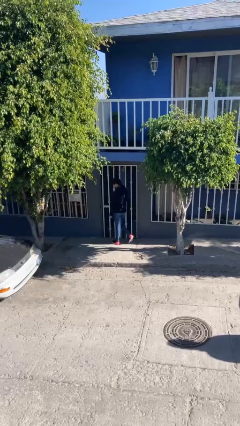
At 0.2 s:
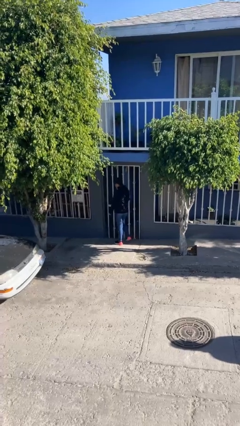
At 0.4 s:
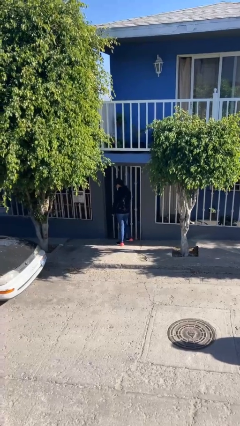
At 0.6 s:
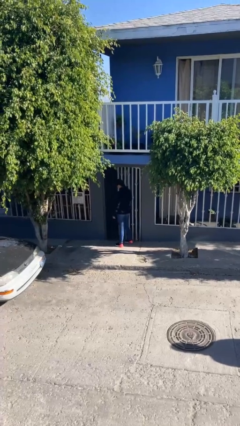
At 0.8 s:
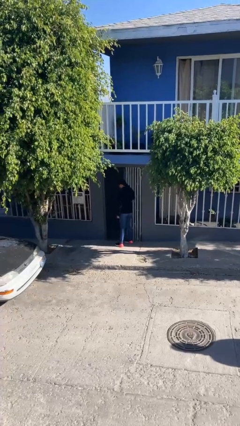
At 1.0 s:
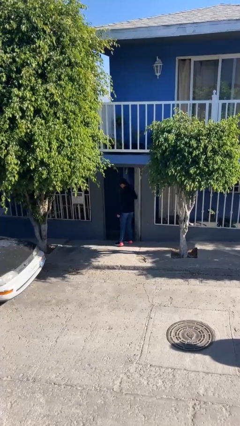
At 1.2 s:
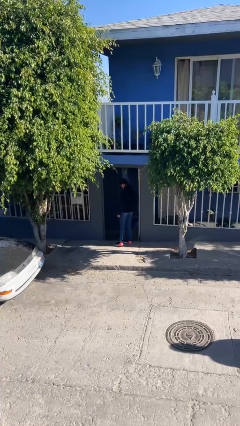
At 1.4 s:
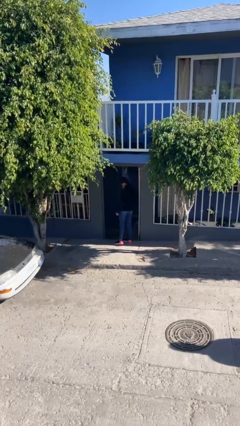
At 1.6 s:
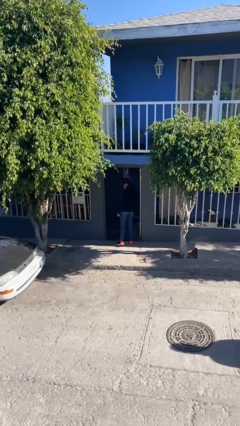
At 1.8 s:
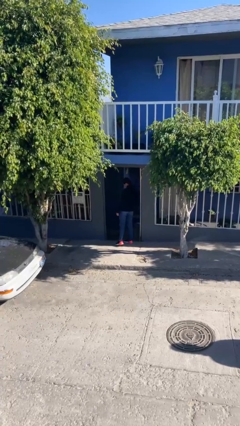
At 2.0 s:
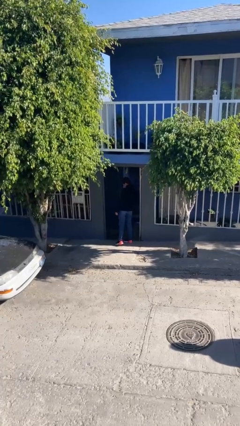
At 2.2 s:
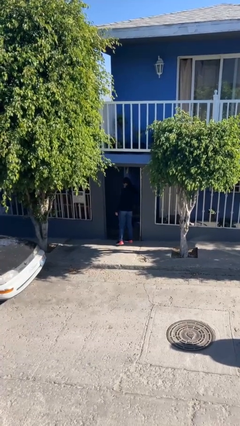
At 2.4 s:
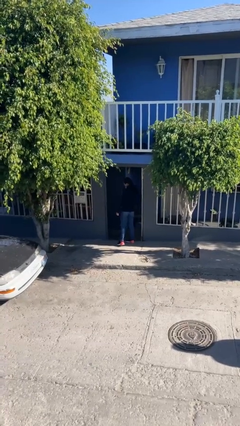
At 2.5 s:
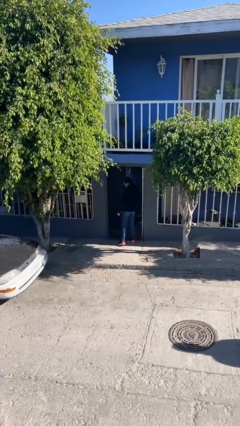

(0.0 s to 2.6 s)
person opens facility door

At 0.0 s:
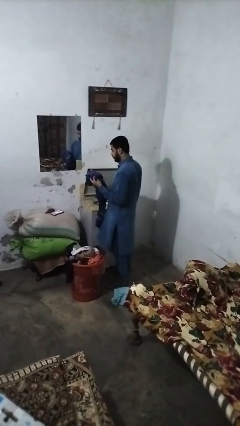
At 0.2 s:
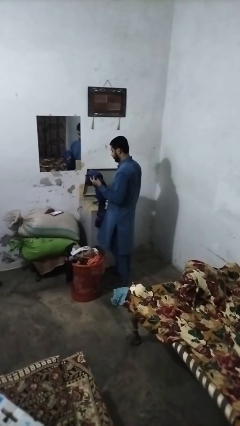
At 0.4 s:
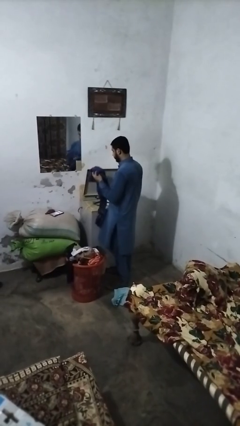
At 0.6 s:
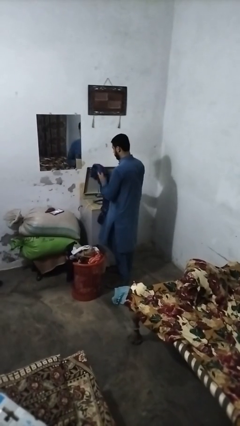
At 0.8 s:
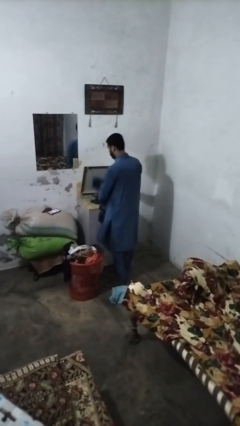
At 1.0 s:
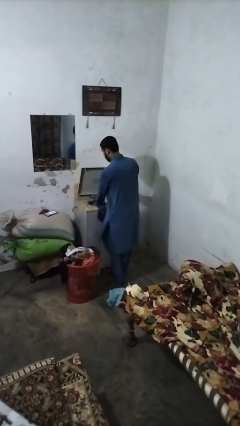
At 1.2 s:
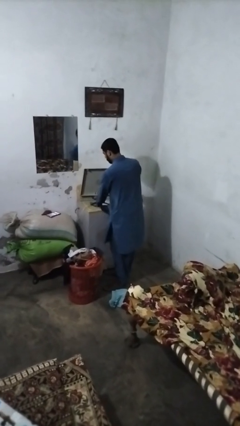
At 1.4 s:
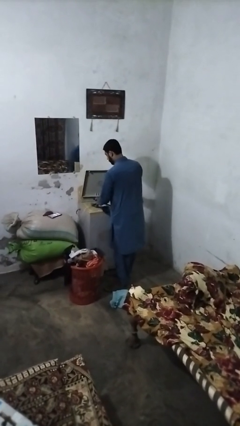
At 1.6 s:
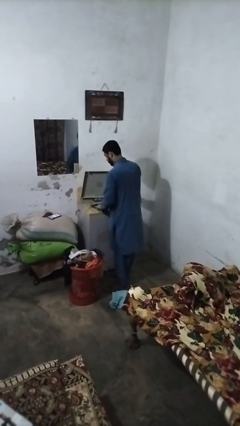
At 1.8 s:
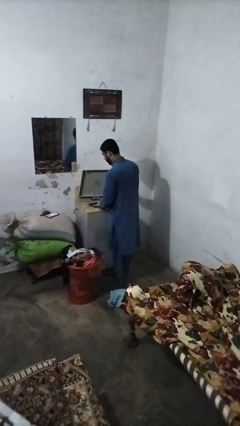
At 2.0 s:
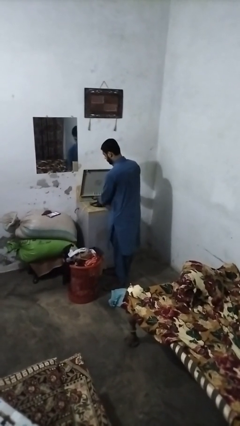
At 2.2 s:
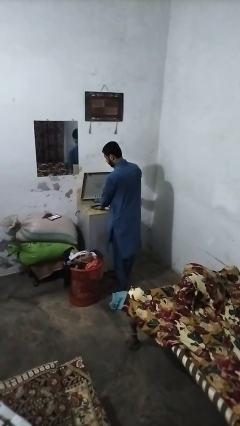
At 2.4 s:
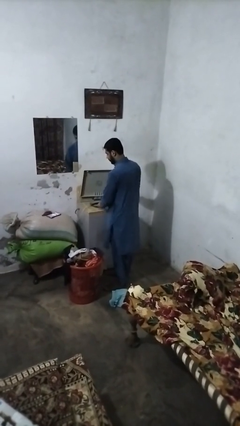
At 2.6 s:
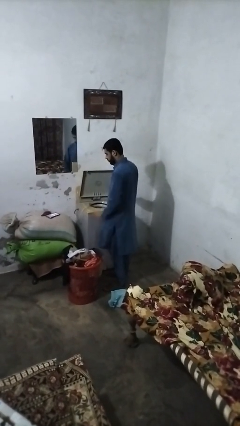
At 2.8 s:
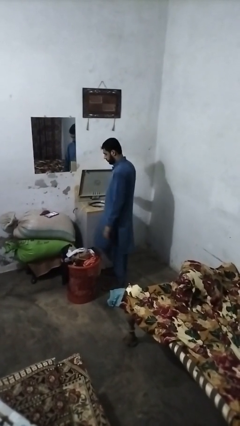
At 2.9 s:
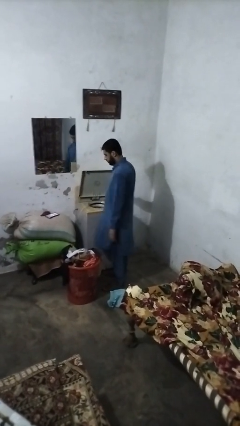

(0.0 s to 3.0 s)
person loads clotheswasher

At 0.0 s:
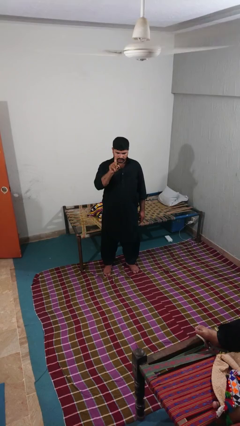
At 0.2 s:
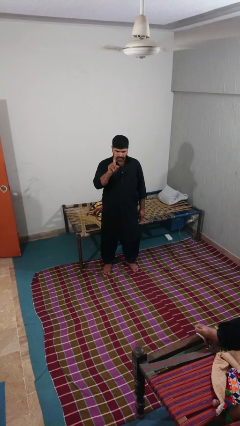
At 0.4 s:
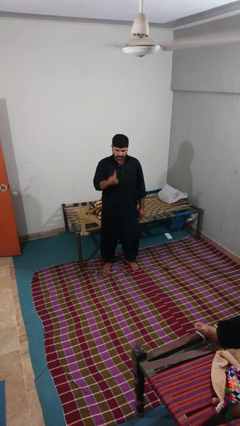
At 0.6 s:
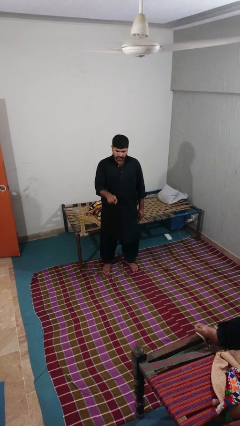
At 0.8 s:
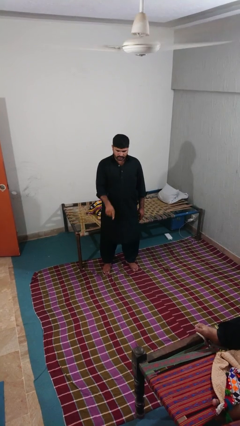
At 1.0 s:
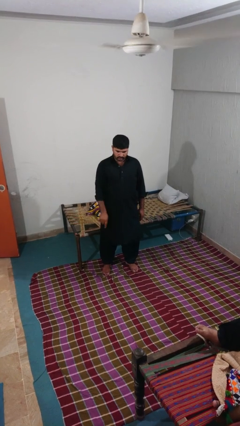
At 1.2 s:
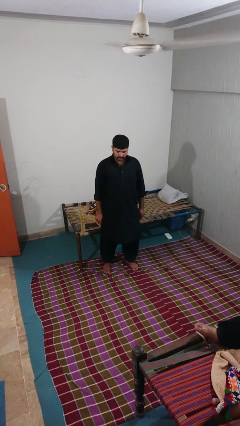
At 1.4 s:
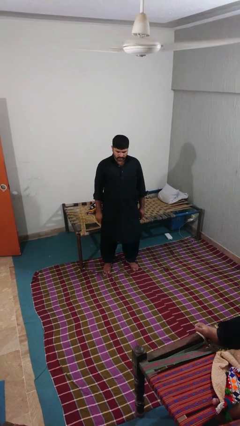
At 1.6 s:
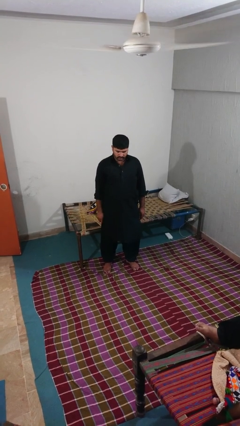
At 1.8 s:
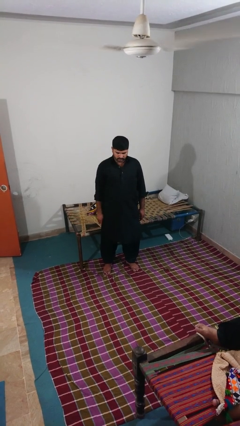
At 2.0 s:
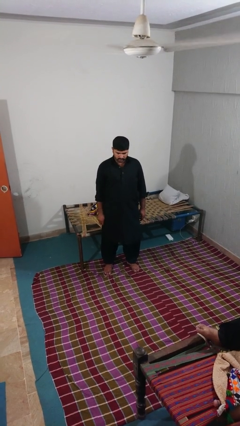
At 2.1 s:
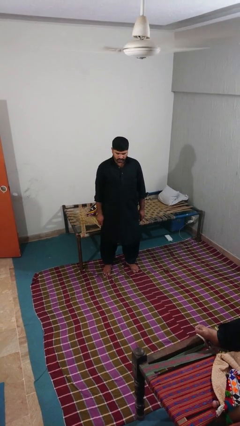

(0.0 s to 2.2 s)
person gestures swipe down

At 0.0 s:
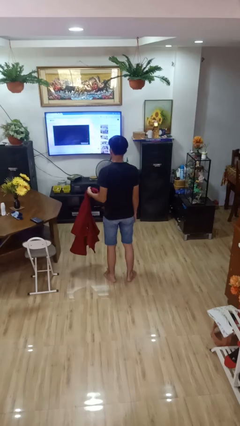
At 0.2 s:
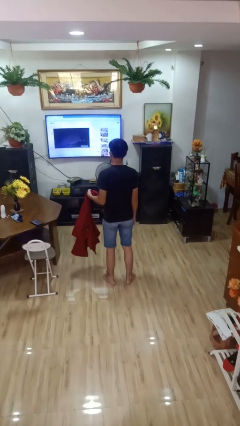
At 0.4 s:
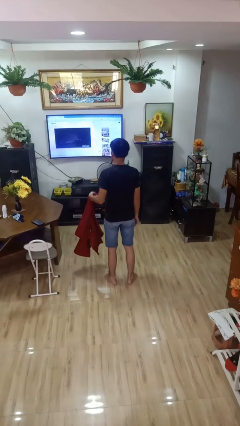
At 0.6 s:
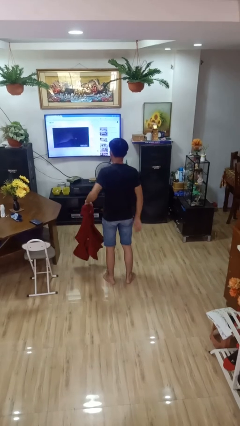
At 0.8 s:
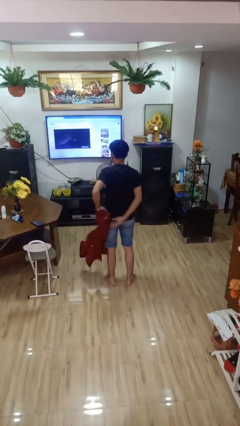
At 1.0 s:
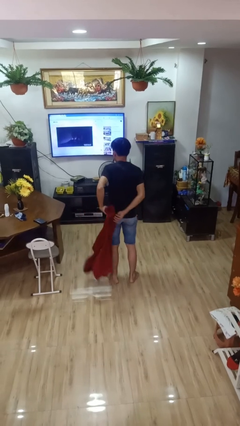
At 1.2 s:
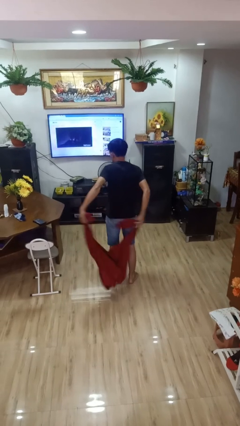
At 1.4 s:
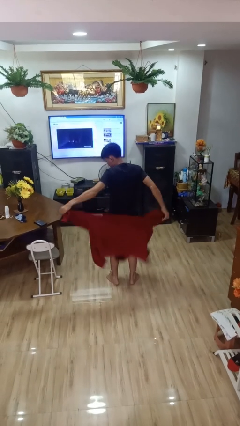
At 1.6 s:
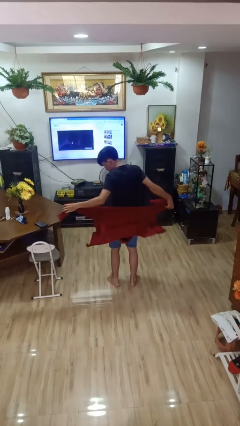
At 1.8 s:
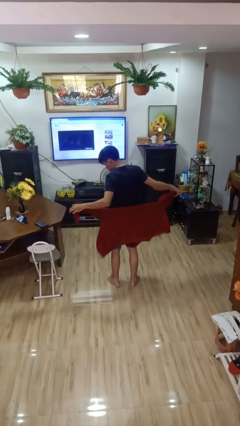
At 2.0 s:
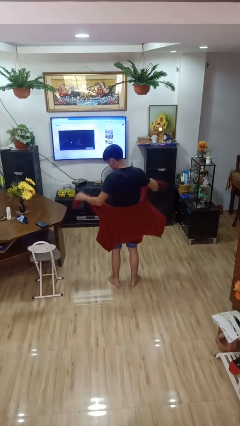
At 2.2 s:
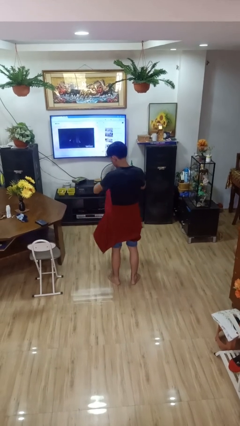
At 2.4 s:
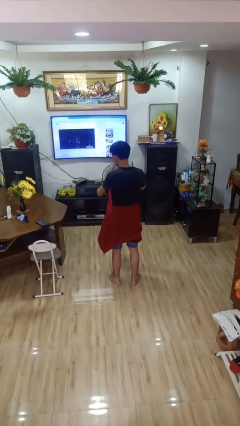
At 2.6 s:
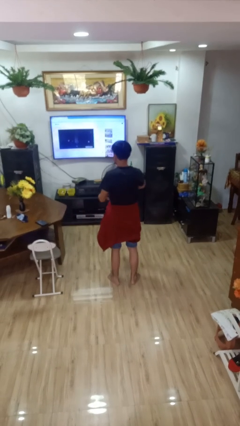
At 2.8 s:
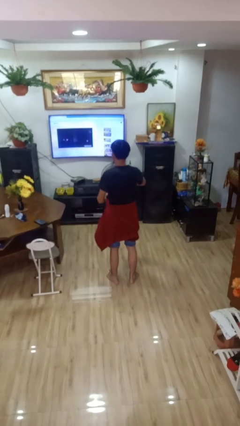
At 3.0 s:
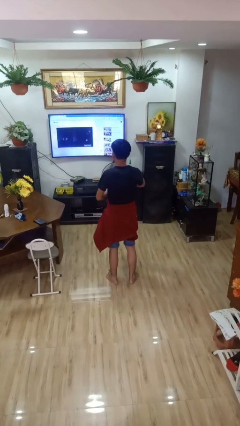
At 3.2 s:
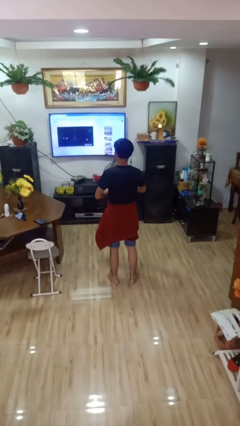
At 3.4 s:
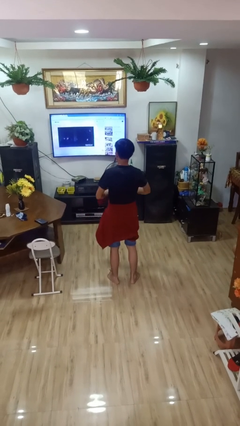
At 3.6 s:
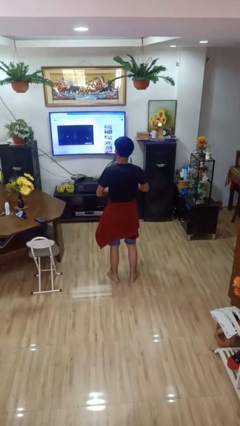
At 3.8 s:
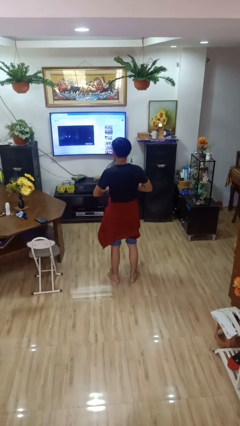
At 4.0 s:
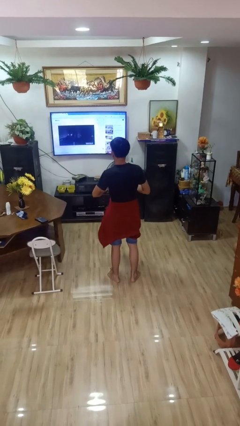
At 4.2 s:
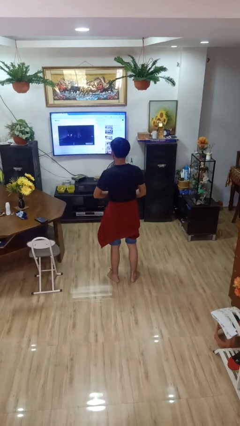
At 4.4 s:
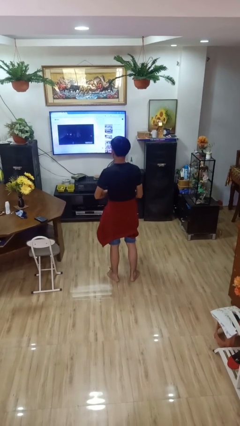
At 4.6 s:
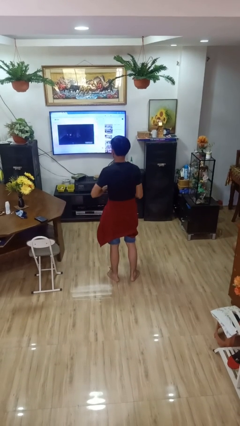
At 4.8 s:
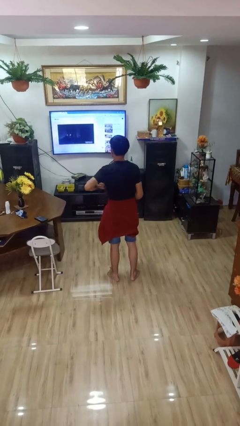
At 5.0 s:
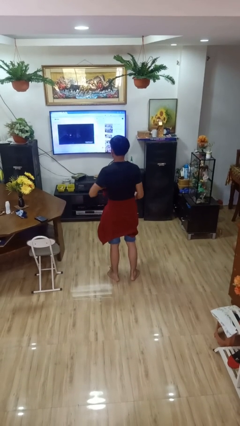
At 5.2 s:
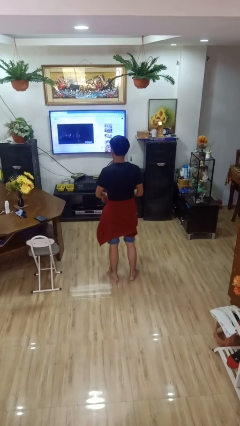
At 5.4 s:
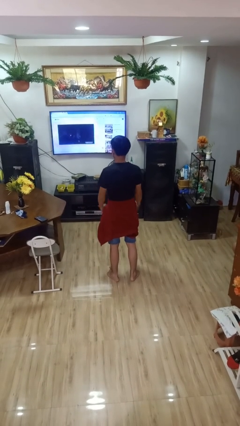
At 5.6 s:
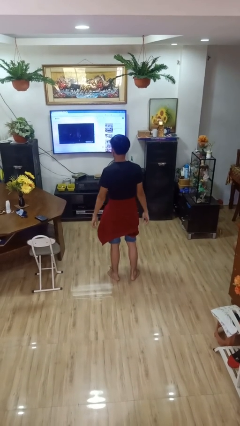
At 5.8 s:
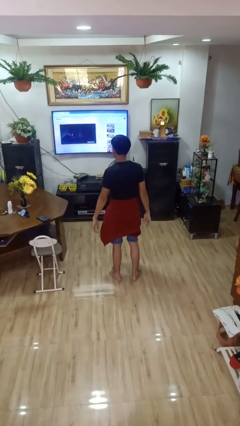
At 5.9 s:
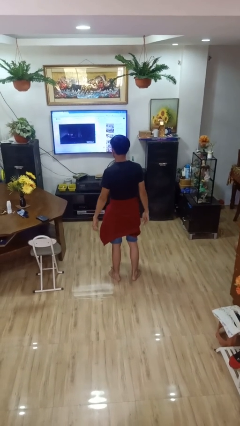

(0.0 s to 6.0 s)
person ties jacket around waist

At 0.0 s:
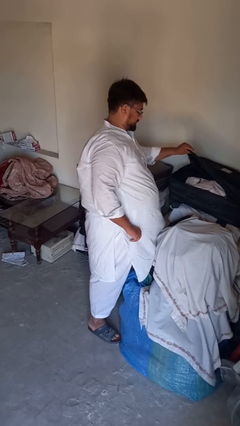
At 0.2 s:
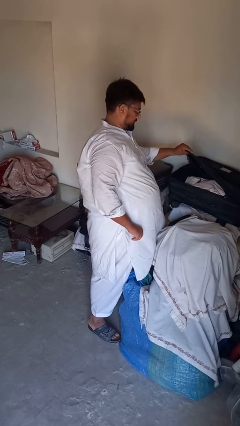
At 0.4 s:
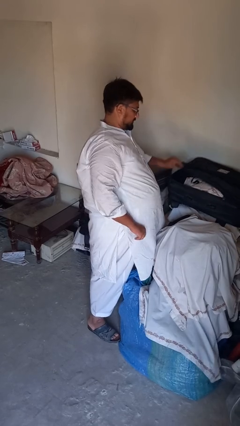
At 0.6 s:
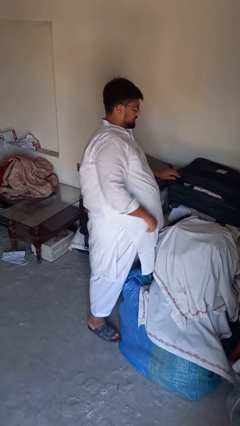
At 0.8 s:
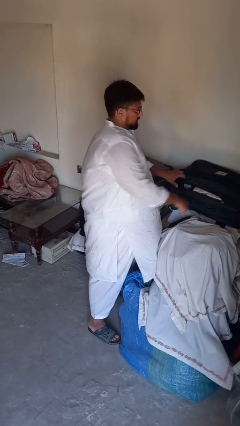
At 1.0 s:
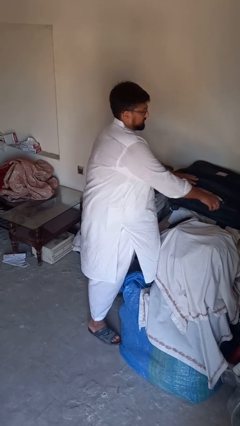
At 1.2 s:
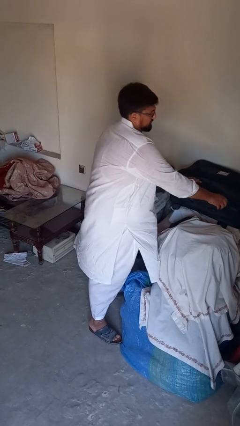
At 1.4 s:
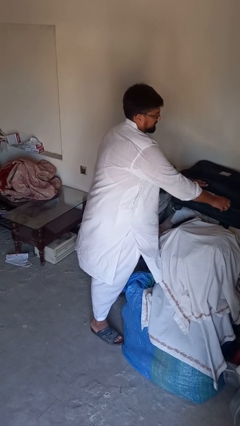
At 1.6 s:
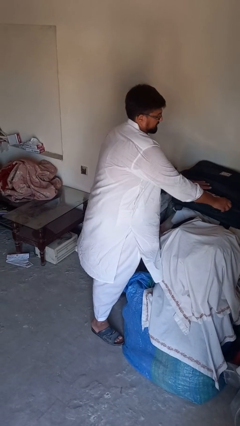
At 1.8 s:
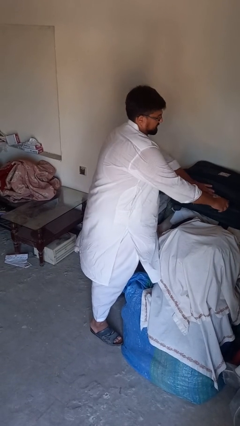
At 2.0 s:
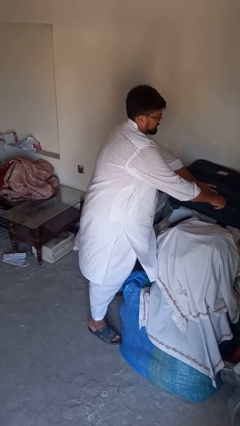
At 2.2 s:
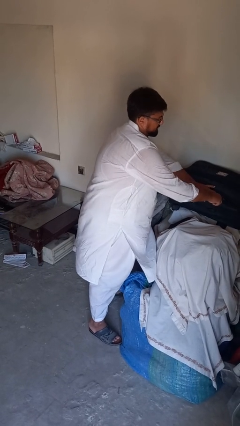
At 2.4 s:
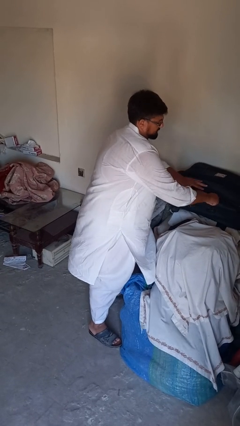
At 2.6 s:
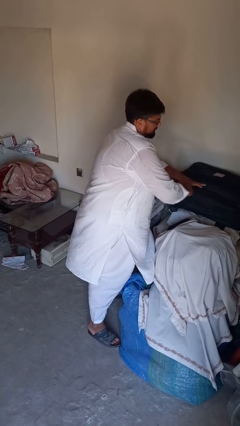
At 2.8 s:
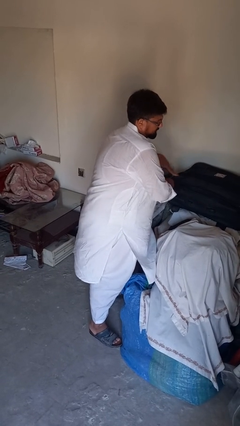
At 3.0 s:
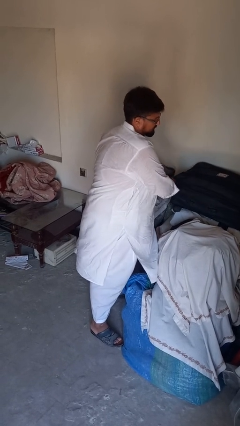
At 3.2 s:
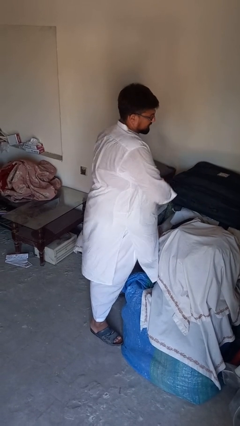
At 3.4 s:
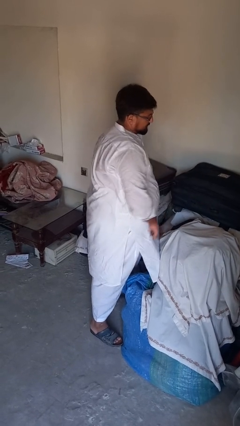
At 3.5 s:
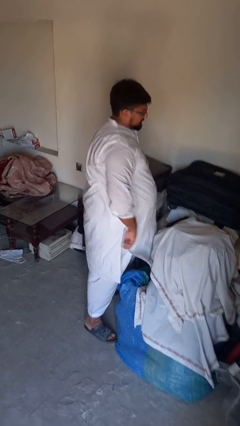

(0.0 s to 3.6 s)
person closes suitcase
